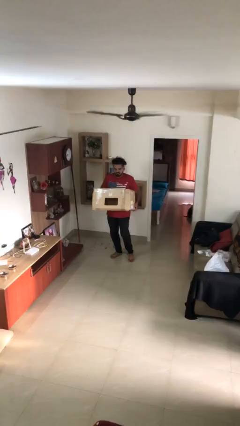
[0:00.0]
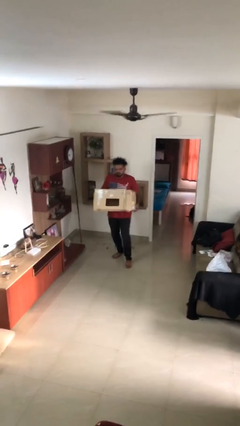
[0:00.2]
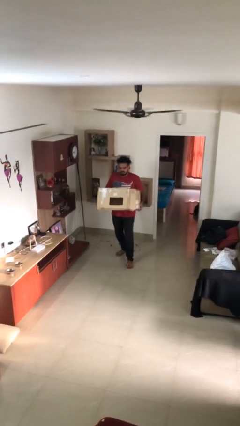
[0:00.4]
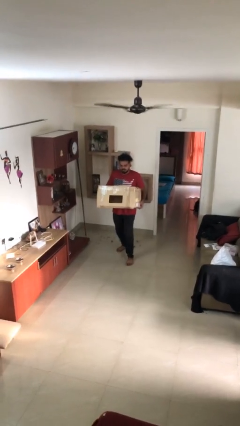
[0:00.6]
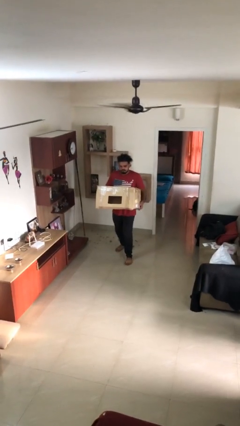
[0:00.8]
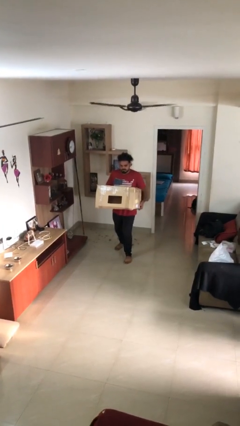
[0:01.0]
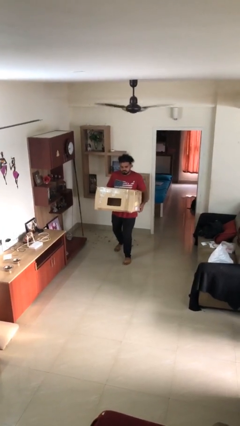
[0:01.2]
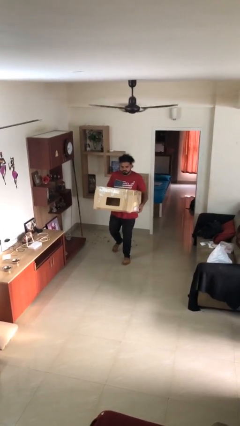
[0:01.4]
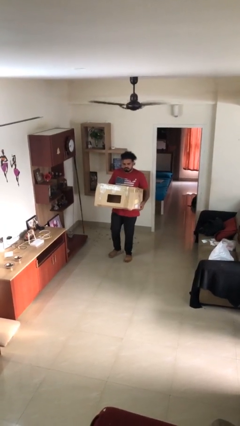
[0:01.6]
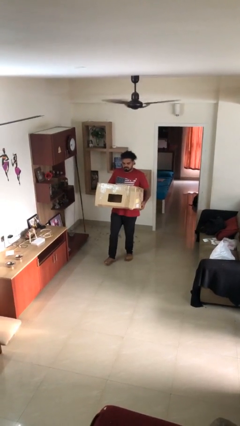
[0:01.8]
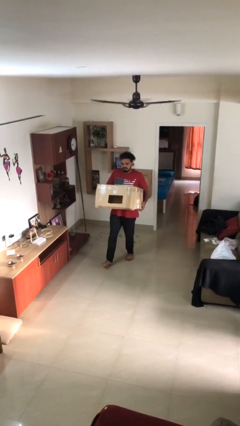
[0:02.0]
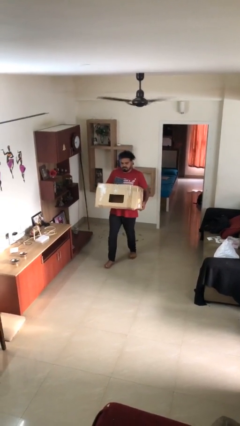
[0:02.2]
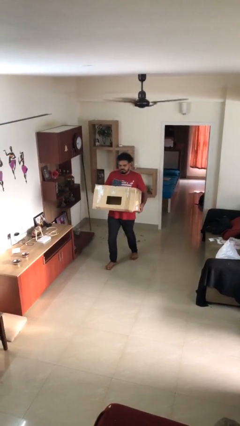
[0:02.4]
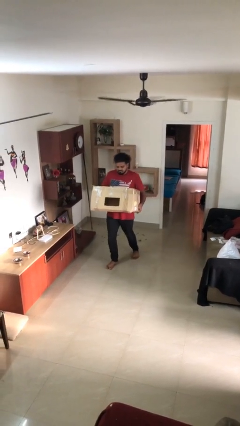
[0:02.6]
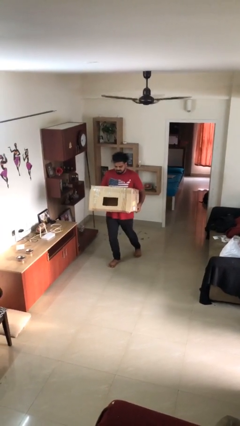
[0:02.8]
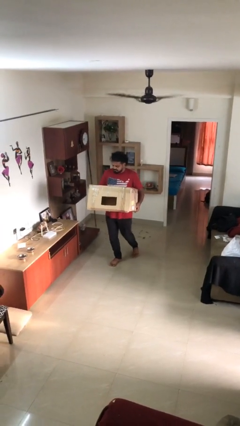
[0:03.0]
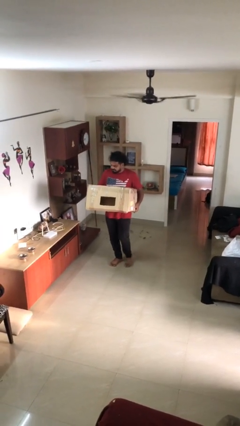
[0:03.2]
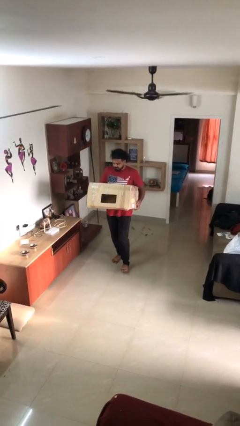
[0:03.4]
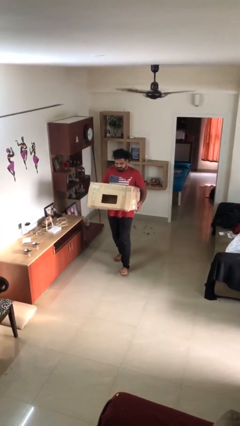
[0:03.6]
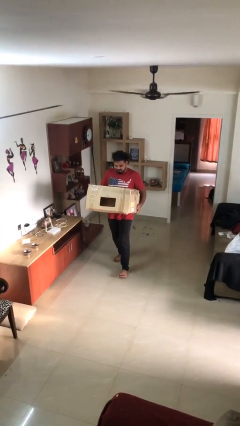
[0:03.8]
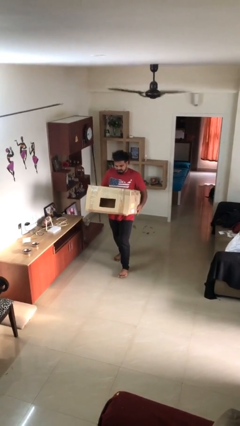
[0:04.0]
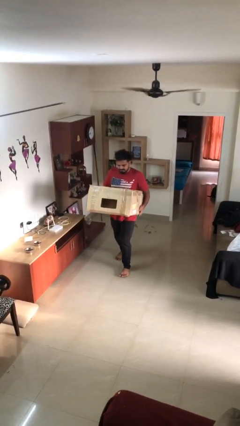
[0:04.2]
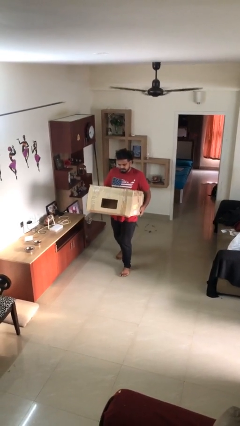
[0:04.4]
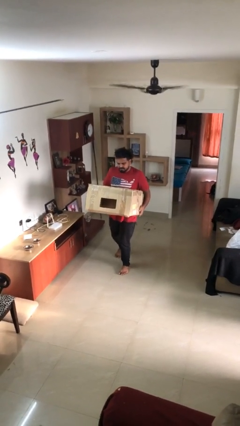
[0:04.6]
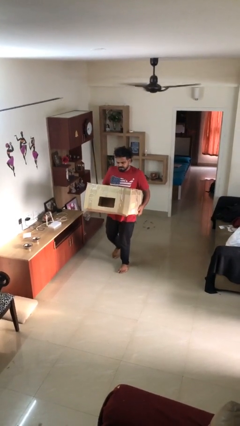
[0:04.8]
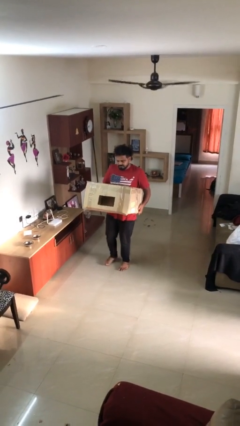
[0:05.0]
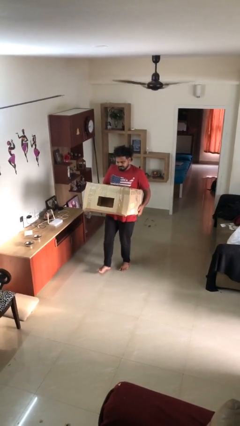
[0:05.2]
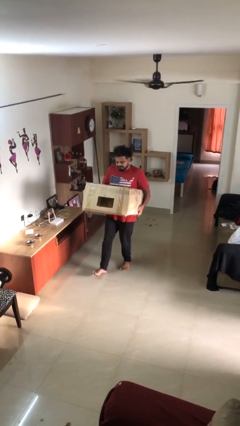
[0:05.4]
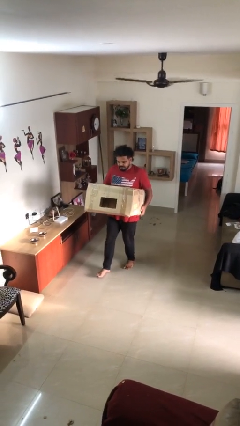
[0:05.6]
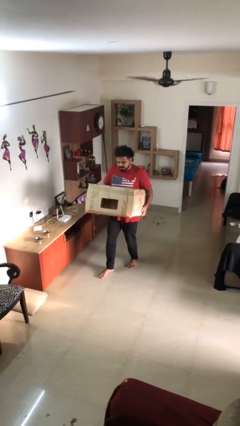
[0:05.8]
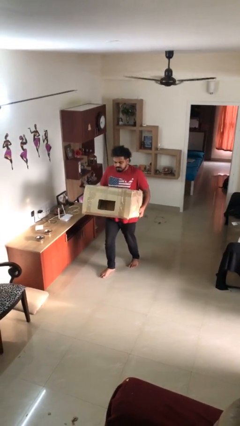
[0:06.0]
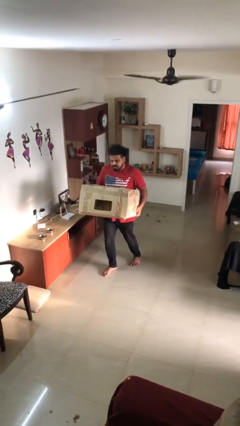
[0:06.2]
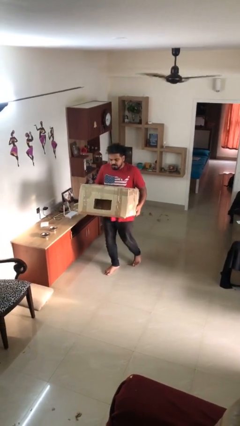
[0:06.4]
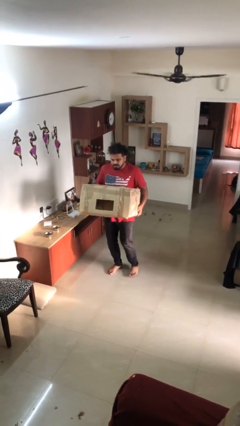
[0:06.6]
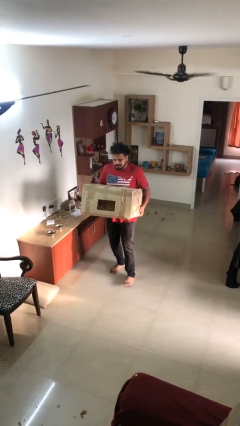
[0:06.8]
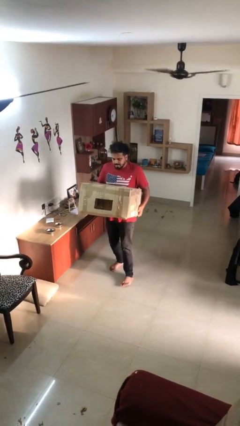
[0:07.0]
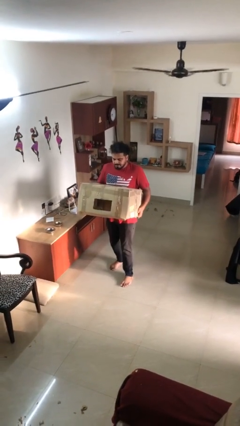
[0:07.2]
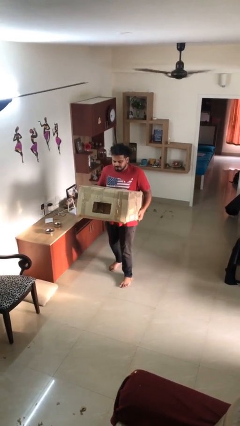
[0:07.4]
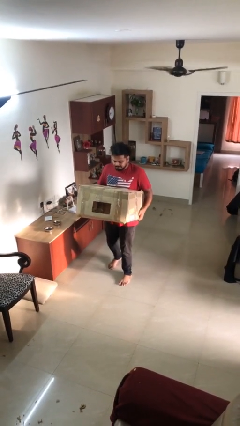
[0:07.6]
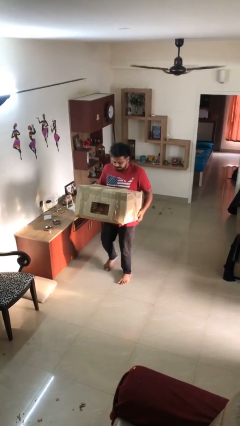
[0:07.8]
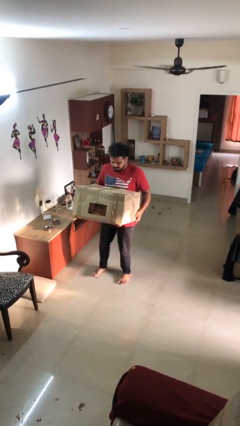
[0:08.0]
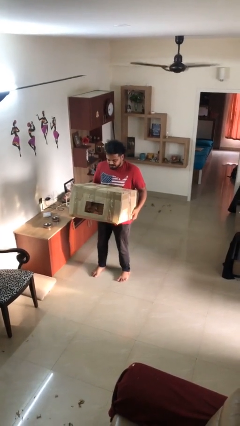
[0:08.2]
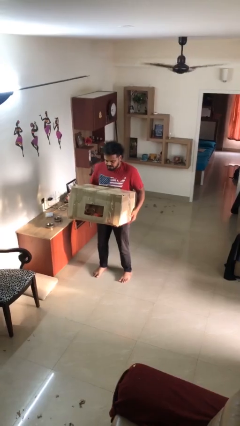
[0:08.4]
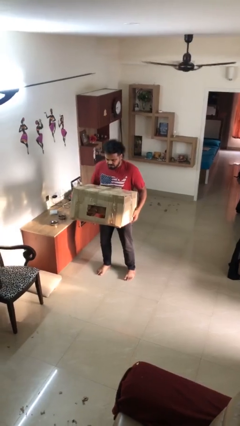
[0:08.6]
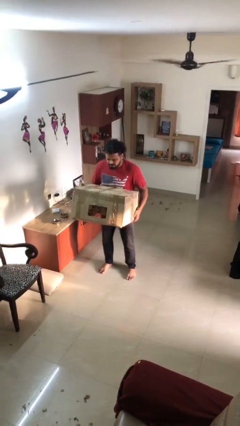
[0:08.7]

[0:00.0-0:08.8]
person carries heavy object

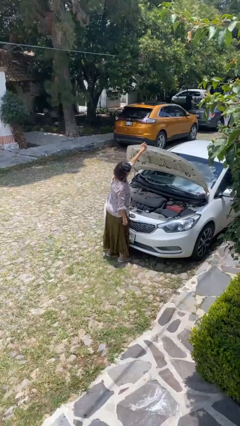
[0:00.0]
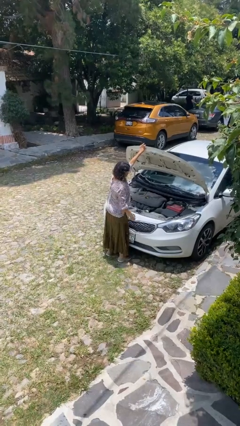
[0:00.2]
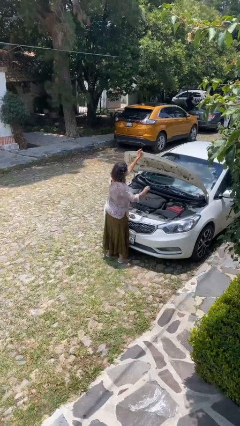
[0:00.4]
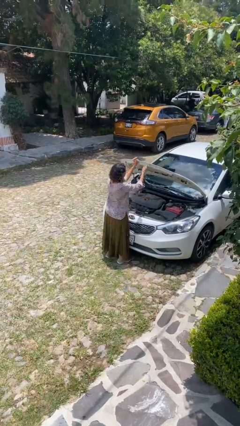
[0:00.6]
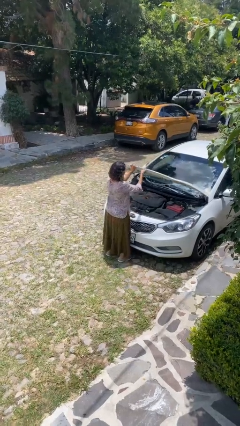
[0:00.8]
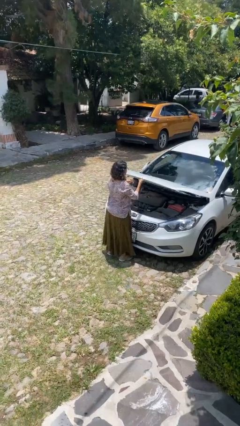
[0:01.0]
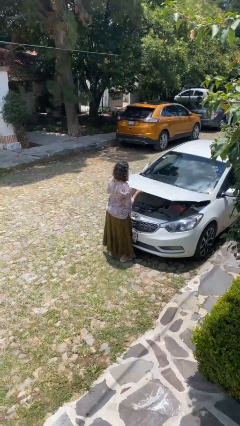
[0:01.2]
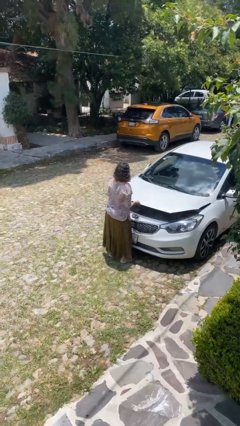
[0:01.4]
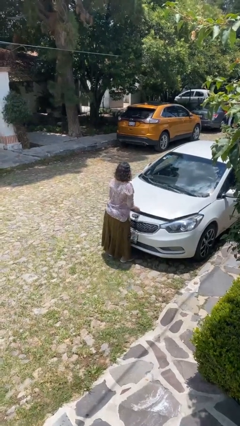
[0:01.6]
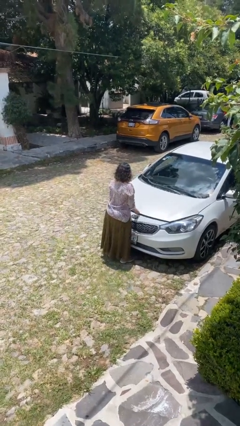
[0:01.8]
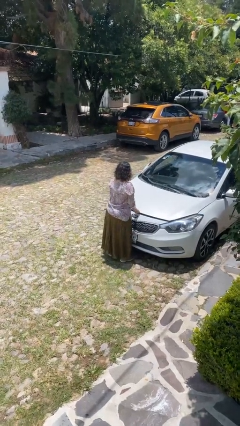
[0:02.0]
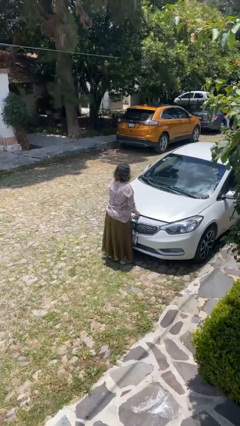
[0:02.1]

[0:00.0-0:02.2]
person closes car hood

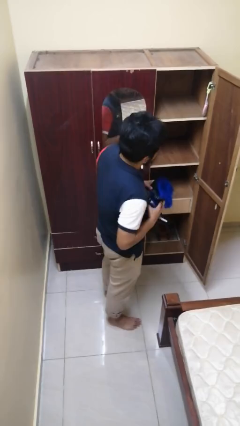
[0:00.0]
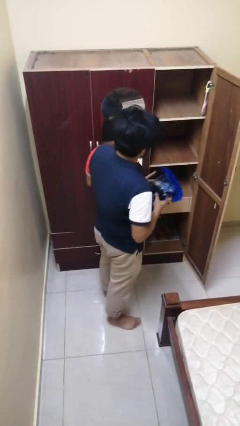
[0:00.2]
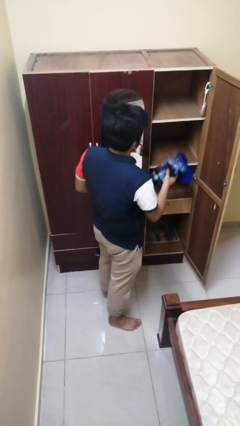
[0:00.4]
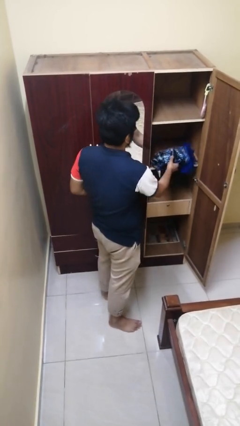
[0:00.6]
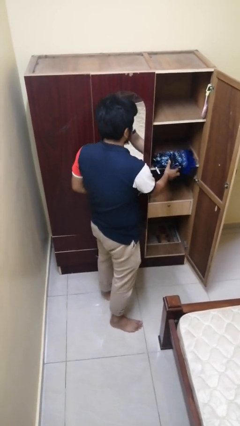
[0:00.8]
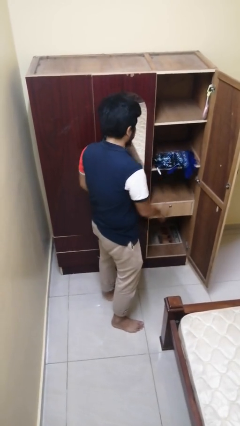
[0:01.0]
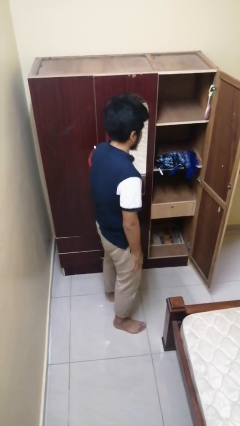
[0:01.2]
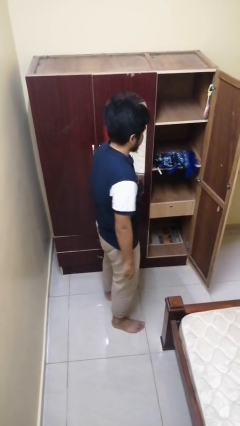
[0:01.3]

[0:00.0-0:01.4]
person puts down object into cabinet

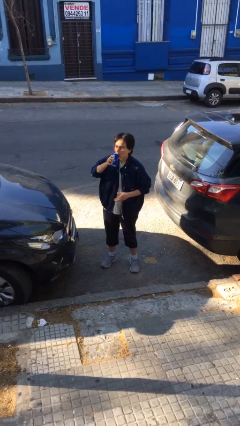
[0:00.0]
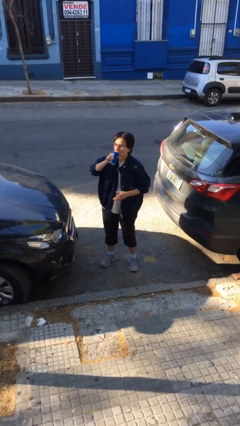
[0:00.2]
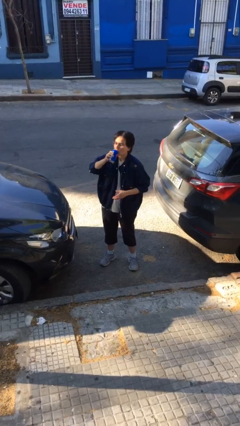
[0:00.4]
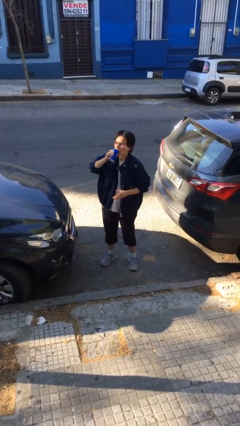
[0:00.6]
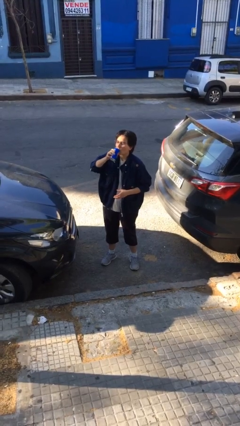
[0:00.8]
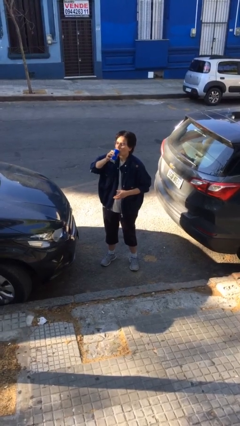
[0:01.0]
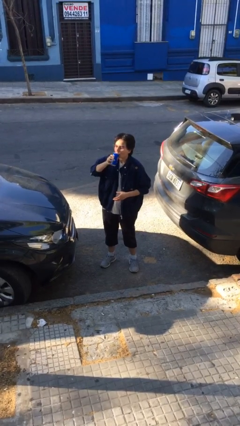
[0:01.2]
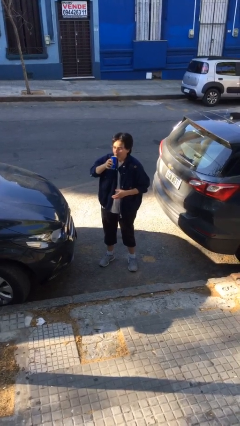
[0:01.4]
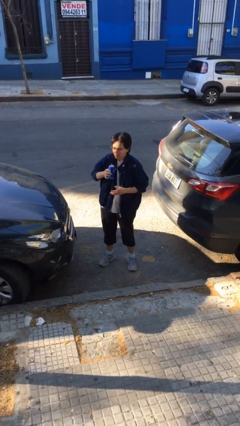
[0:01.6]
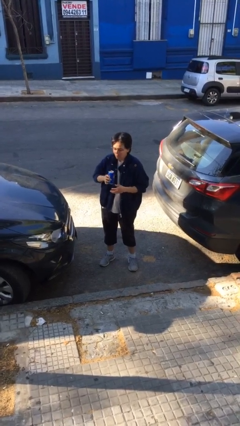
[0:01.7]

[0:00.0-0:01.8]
person drinks from beverage can

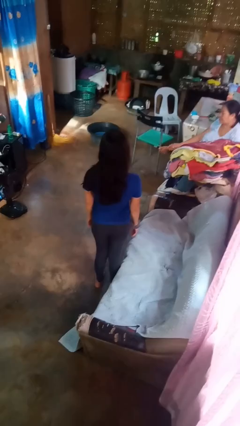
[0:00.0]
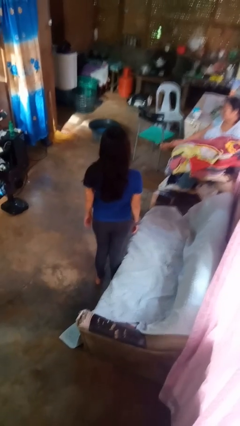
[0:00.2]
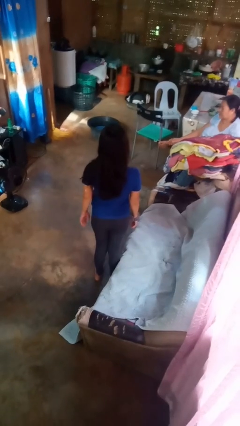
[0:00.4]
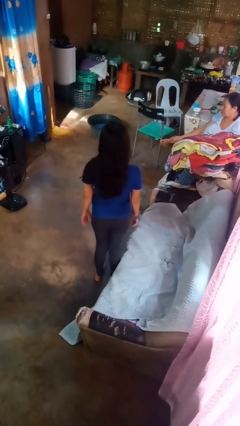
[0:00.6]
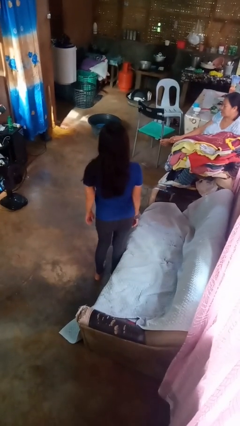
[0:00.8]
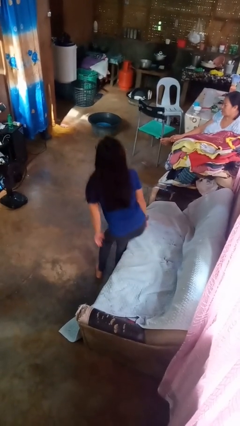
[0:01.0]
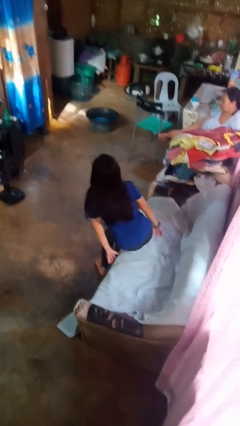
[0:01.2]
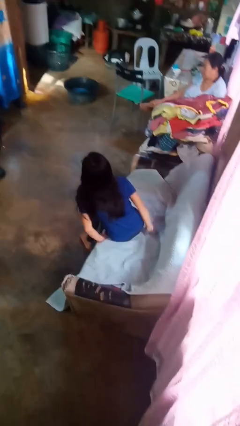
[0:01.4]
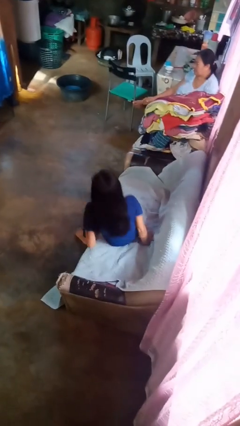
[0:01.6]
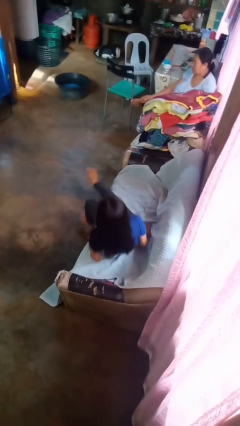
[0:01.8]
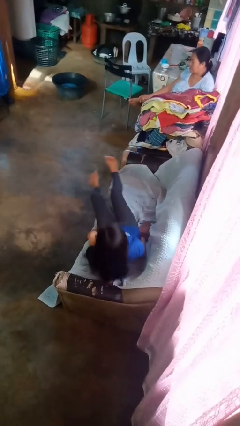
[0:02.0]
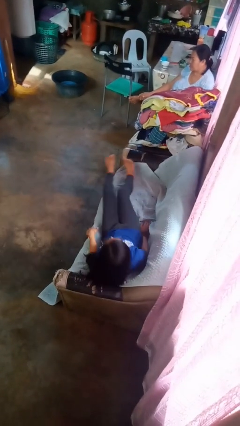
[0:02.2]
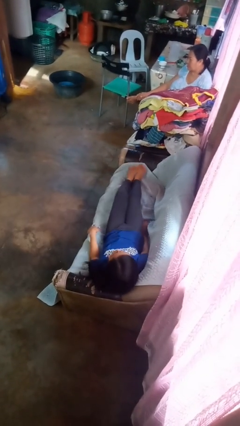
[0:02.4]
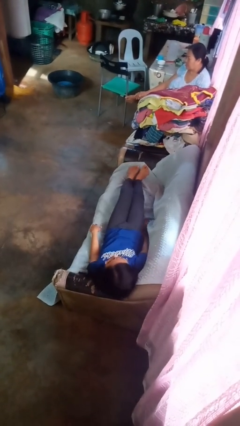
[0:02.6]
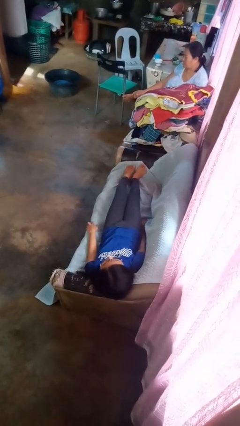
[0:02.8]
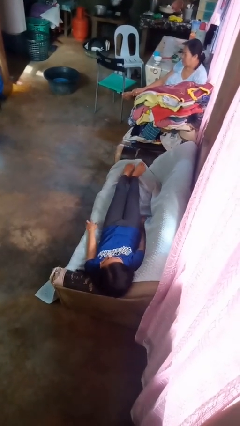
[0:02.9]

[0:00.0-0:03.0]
person lies down on couch

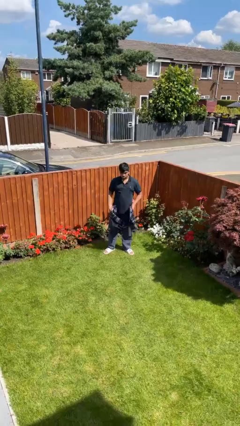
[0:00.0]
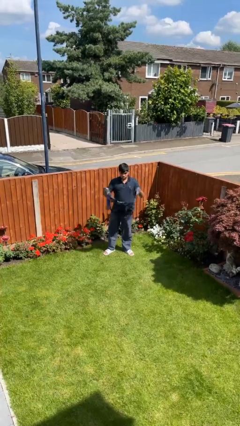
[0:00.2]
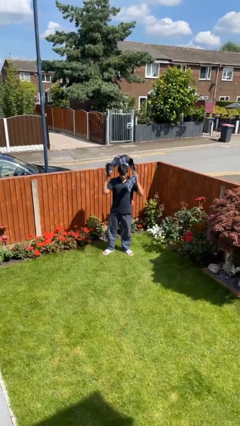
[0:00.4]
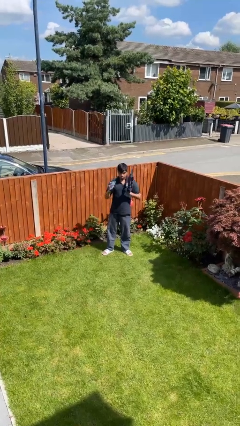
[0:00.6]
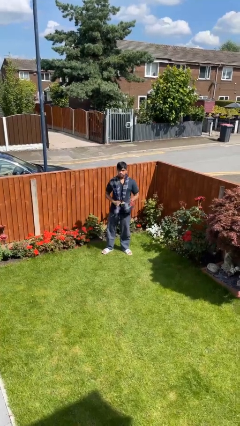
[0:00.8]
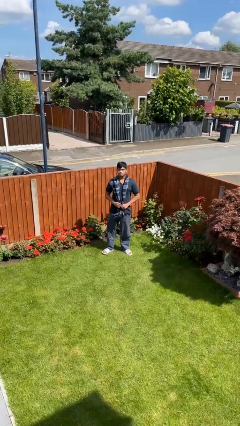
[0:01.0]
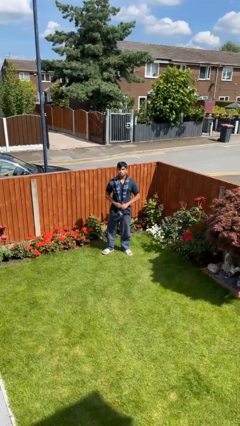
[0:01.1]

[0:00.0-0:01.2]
person puts on scarf
